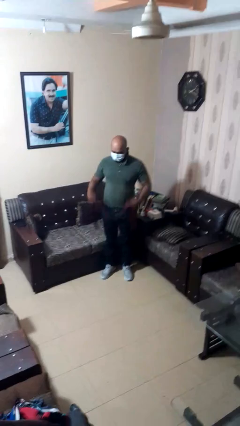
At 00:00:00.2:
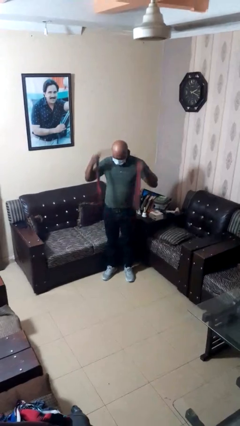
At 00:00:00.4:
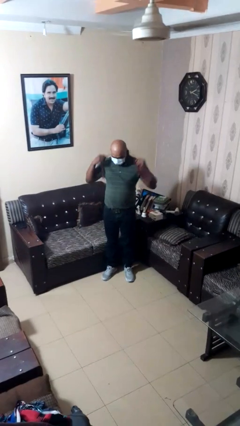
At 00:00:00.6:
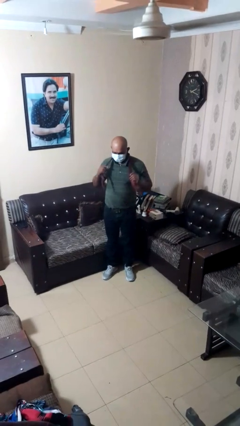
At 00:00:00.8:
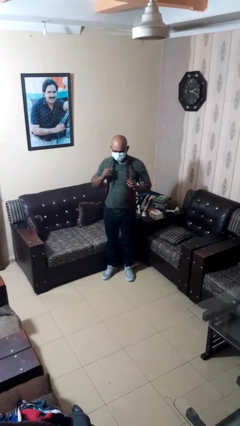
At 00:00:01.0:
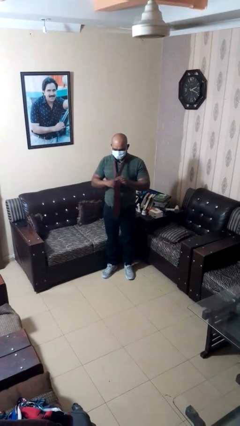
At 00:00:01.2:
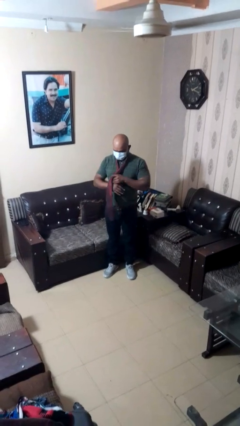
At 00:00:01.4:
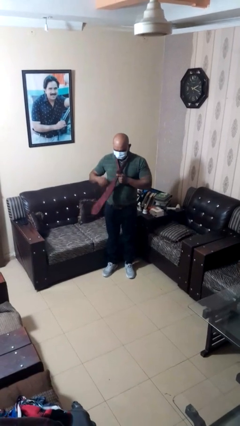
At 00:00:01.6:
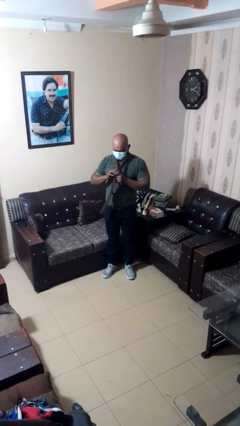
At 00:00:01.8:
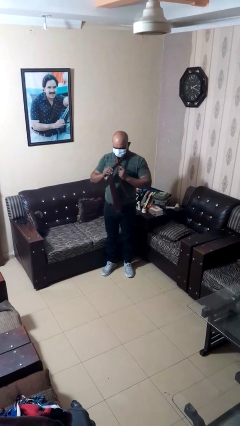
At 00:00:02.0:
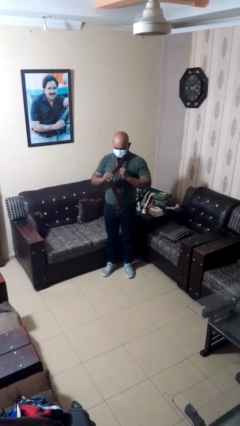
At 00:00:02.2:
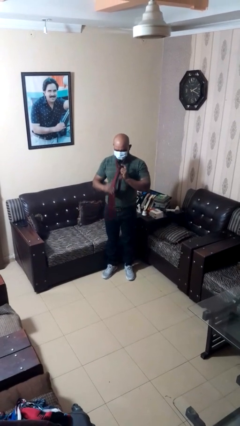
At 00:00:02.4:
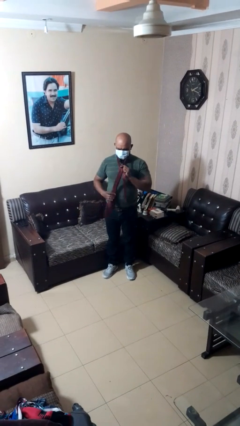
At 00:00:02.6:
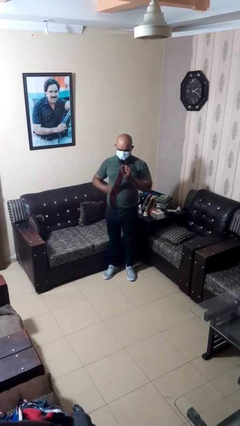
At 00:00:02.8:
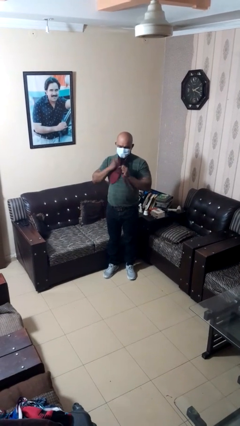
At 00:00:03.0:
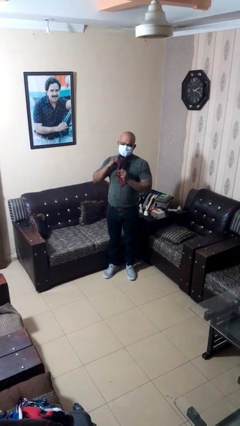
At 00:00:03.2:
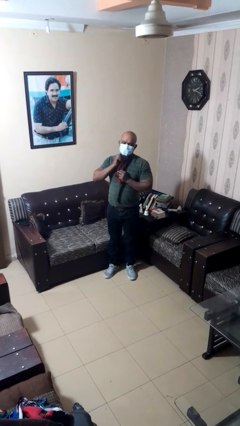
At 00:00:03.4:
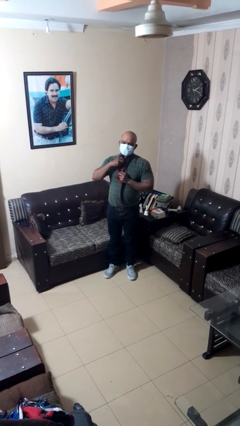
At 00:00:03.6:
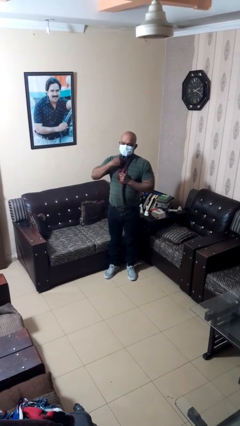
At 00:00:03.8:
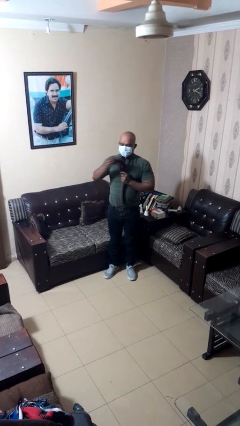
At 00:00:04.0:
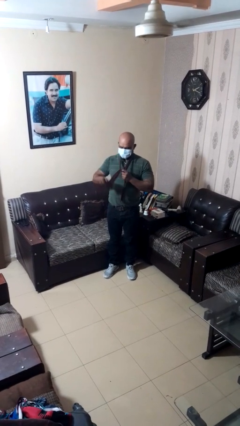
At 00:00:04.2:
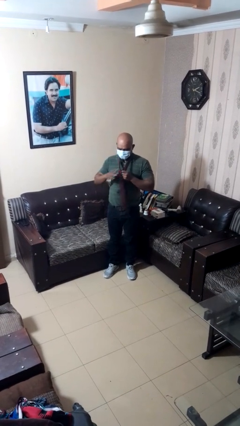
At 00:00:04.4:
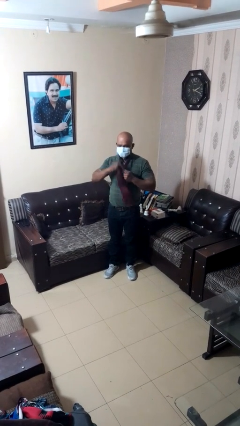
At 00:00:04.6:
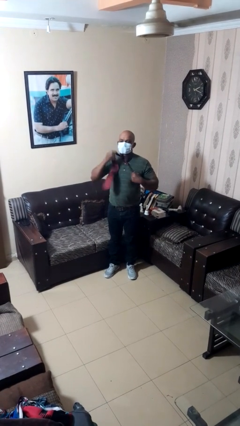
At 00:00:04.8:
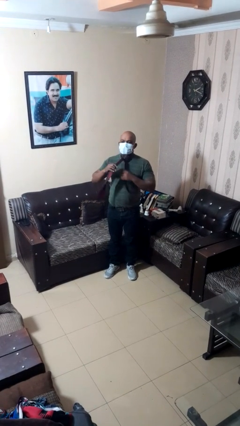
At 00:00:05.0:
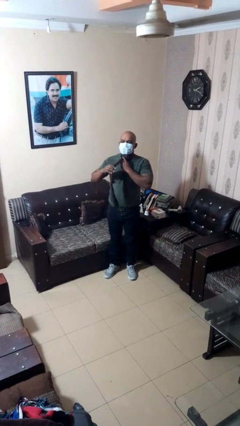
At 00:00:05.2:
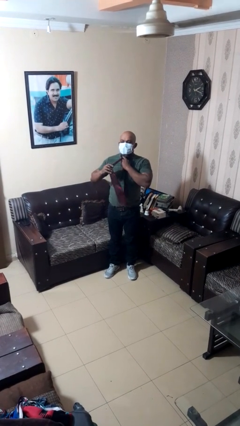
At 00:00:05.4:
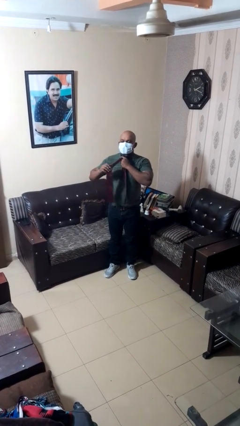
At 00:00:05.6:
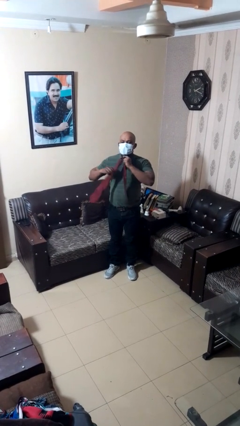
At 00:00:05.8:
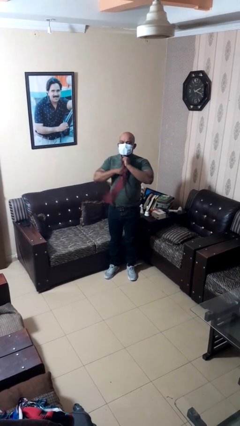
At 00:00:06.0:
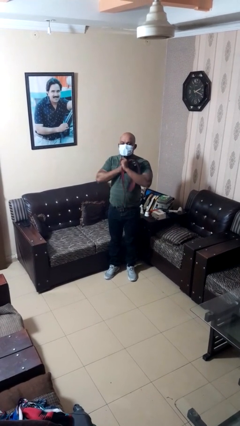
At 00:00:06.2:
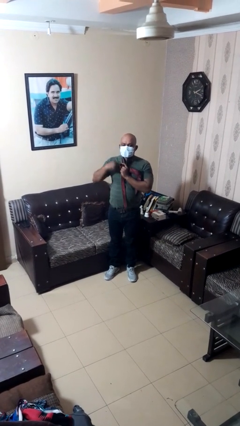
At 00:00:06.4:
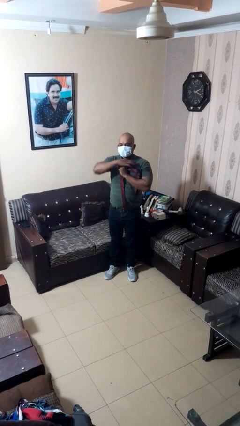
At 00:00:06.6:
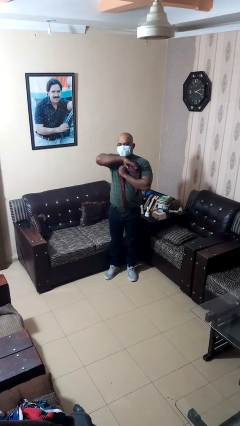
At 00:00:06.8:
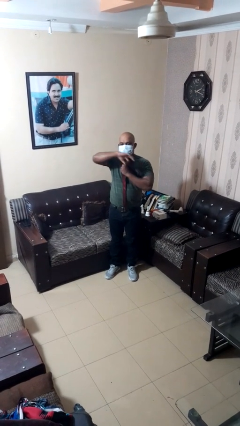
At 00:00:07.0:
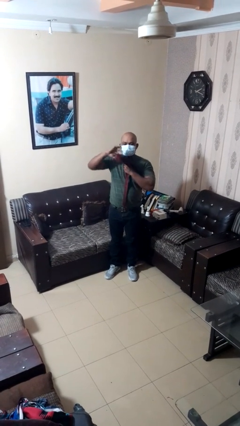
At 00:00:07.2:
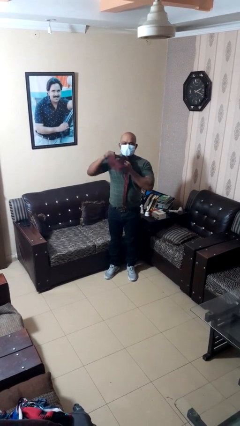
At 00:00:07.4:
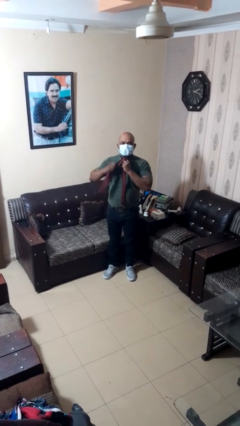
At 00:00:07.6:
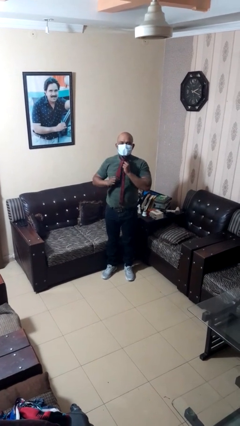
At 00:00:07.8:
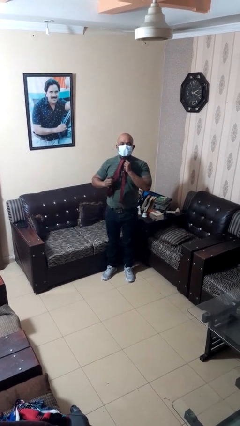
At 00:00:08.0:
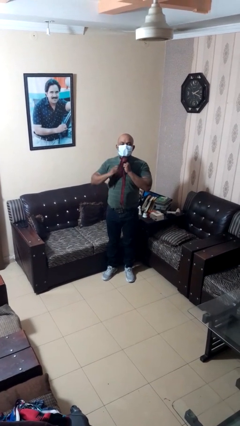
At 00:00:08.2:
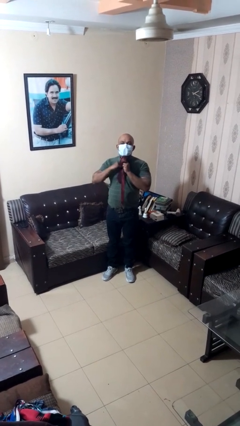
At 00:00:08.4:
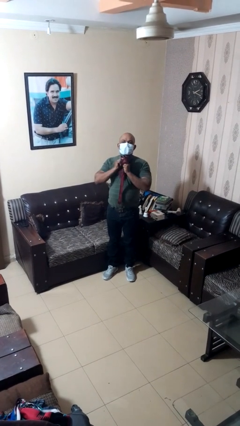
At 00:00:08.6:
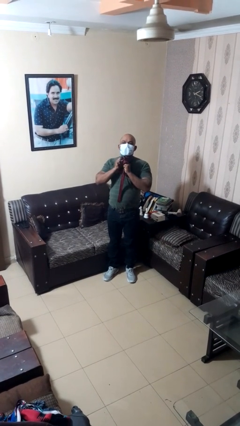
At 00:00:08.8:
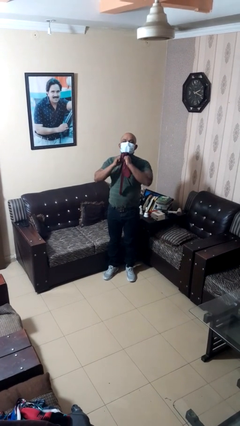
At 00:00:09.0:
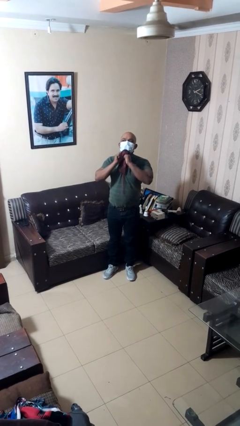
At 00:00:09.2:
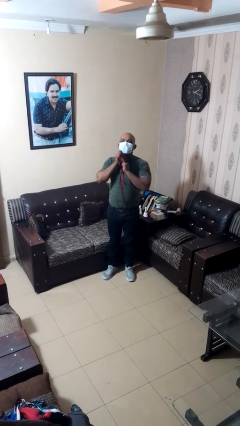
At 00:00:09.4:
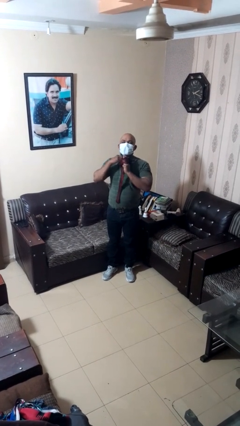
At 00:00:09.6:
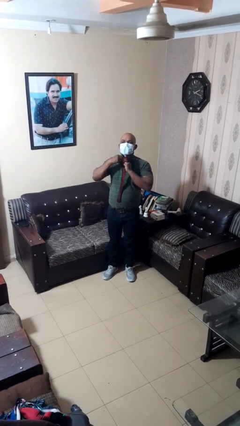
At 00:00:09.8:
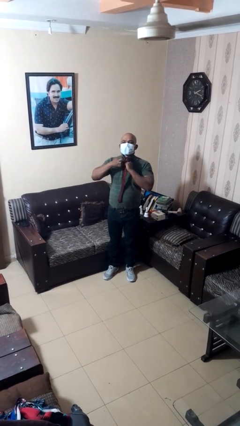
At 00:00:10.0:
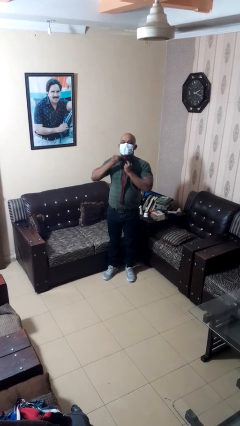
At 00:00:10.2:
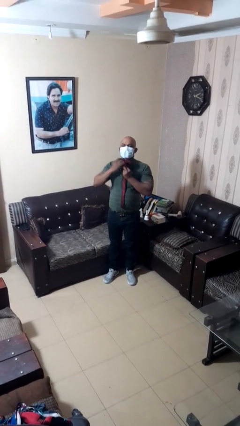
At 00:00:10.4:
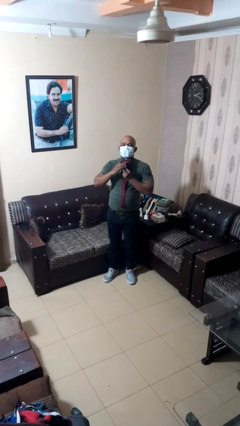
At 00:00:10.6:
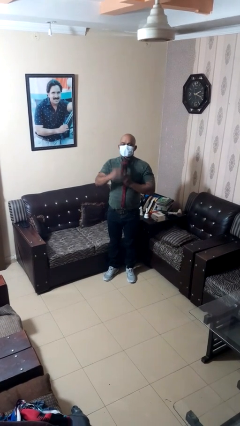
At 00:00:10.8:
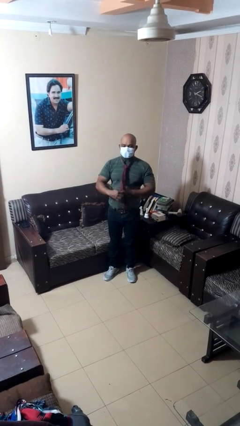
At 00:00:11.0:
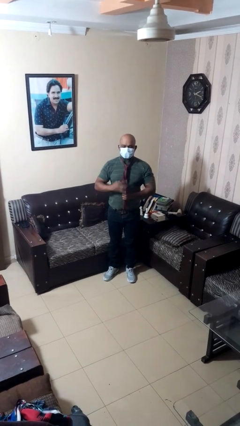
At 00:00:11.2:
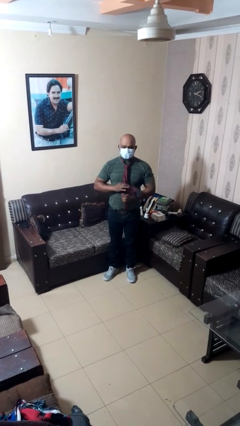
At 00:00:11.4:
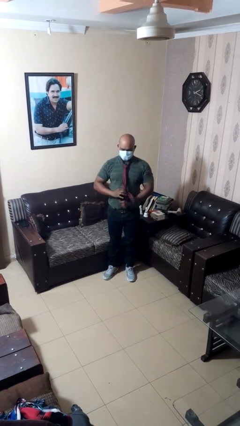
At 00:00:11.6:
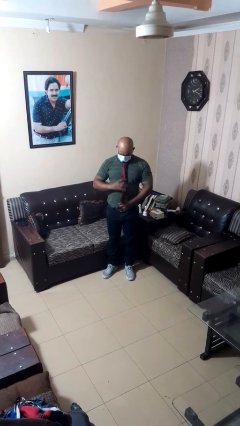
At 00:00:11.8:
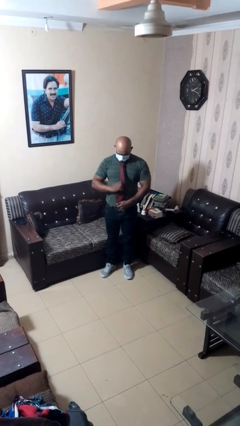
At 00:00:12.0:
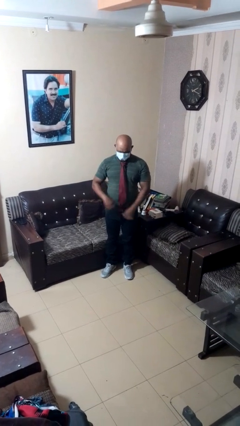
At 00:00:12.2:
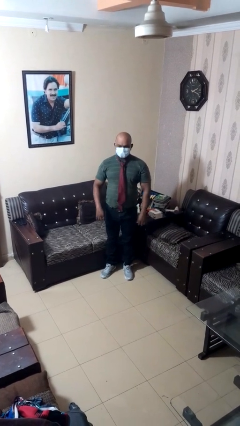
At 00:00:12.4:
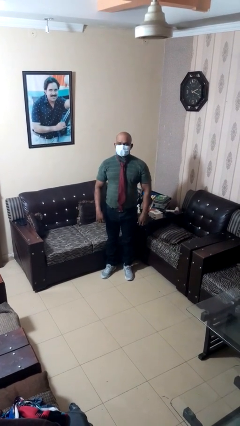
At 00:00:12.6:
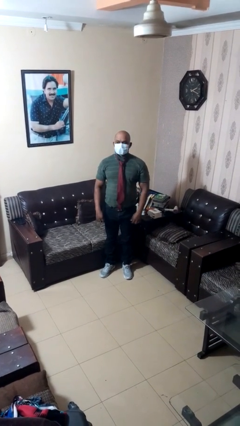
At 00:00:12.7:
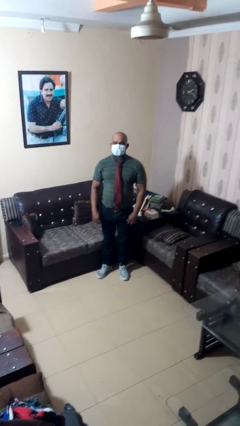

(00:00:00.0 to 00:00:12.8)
person puts on necktie

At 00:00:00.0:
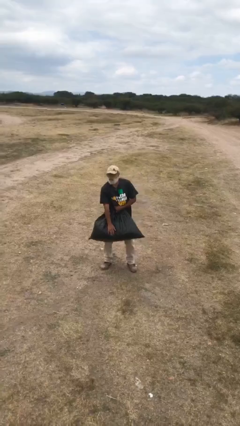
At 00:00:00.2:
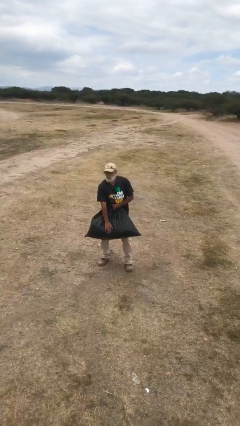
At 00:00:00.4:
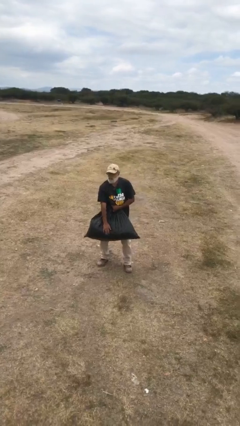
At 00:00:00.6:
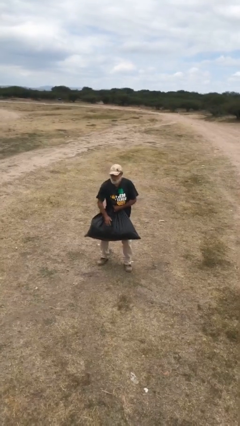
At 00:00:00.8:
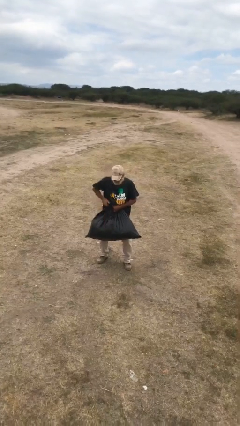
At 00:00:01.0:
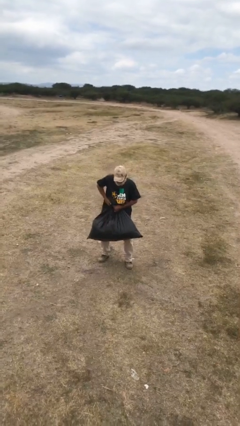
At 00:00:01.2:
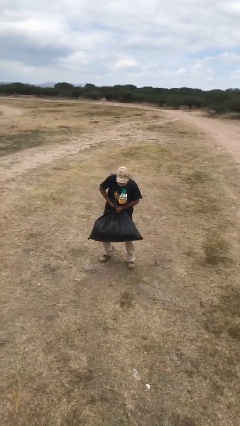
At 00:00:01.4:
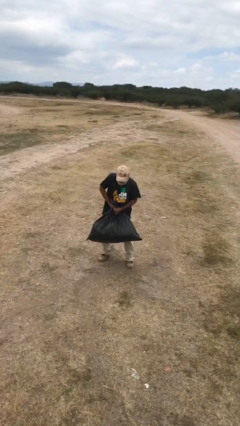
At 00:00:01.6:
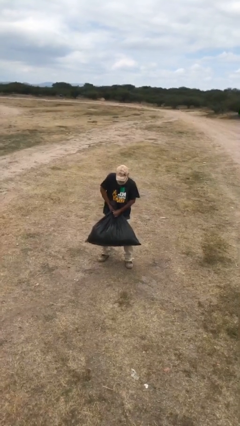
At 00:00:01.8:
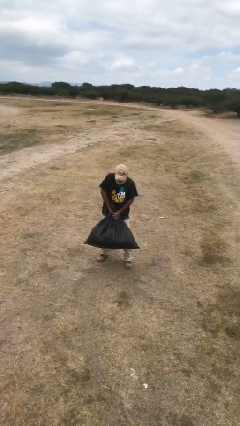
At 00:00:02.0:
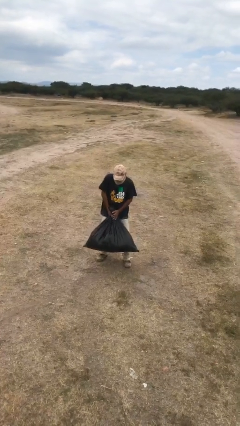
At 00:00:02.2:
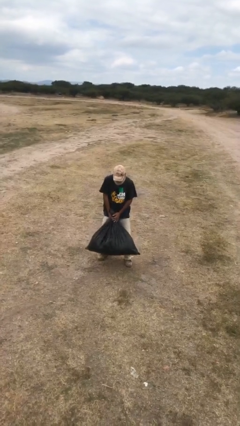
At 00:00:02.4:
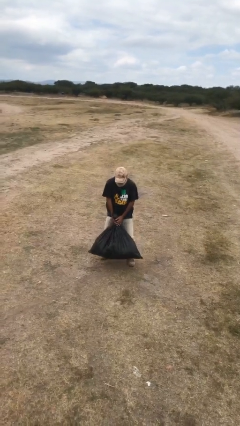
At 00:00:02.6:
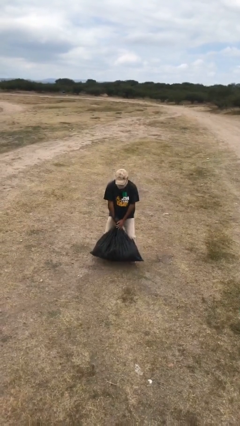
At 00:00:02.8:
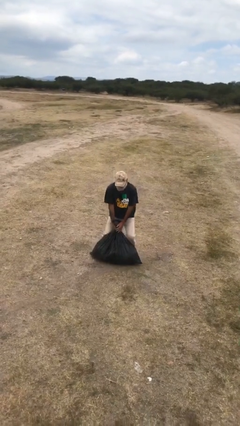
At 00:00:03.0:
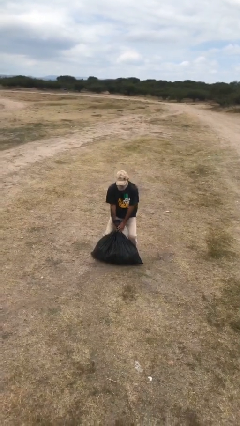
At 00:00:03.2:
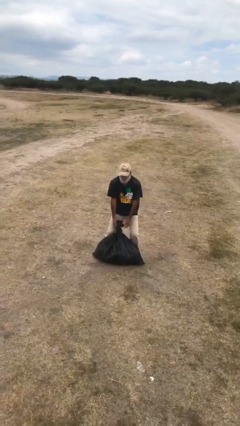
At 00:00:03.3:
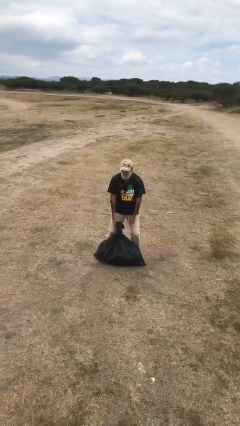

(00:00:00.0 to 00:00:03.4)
person puts down object on floor

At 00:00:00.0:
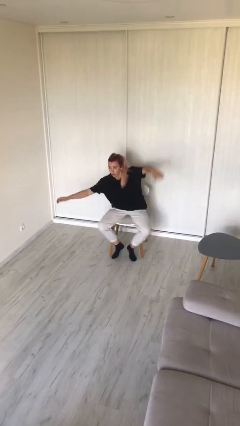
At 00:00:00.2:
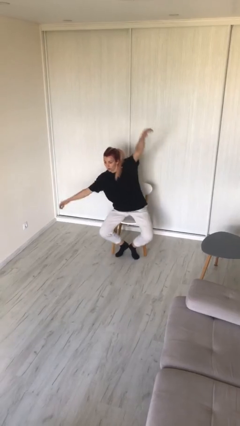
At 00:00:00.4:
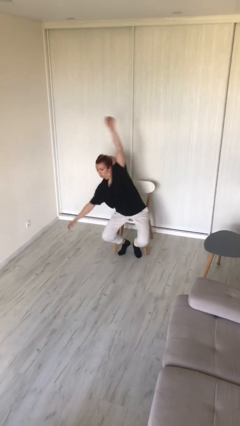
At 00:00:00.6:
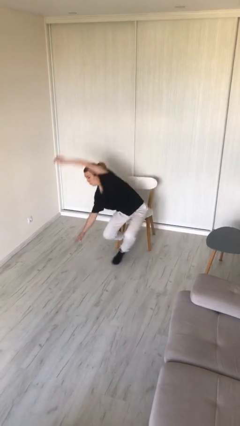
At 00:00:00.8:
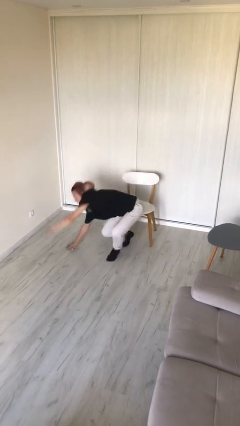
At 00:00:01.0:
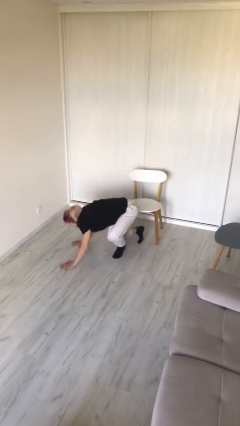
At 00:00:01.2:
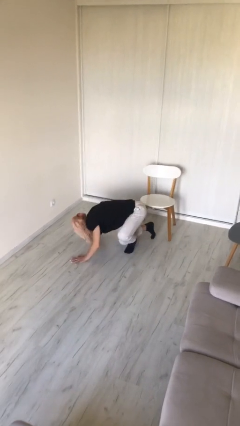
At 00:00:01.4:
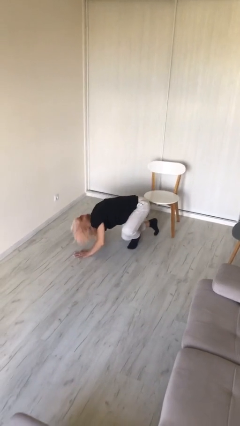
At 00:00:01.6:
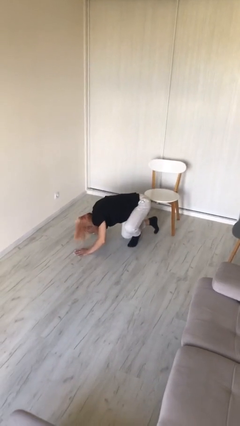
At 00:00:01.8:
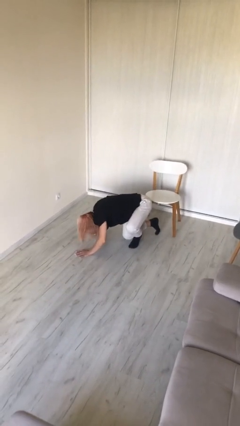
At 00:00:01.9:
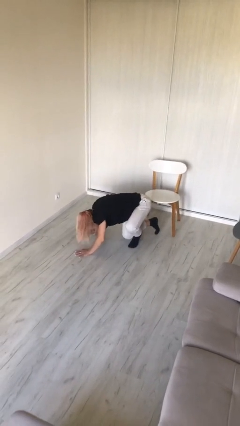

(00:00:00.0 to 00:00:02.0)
person falls from chair
